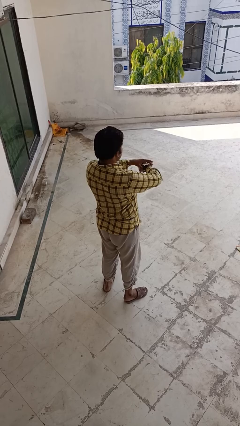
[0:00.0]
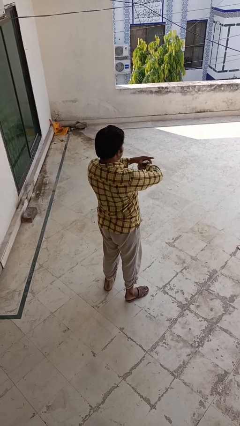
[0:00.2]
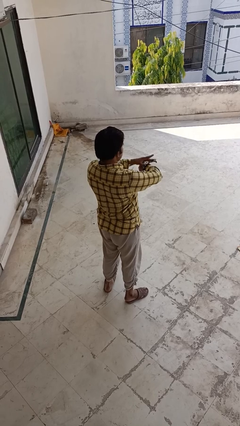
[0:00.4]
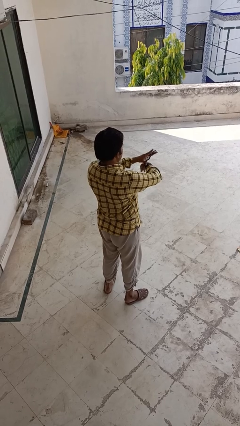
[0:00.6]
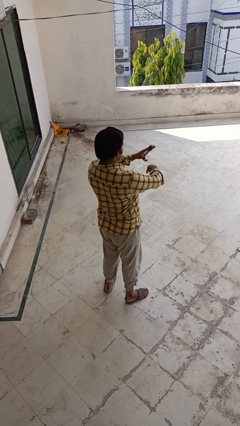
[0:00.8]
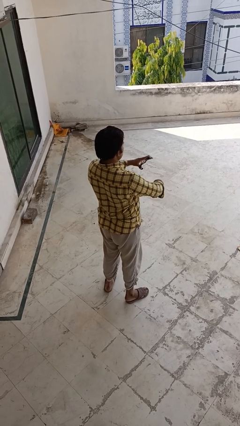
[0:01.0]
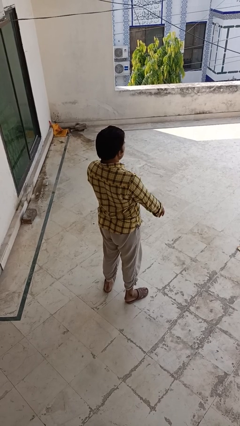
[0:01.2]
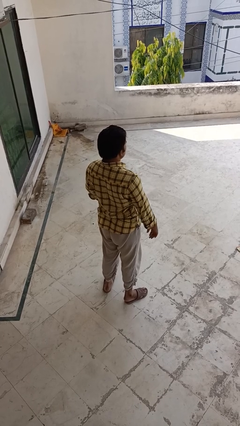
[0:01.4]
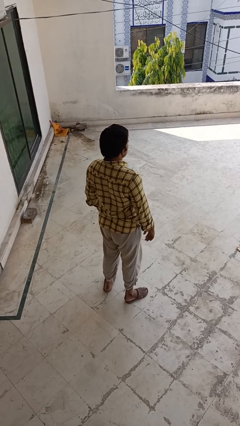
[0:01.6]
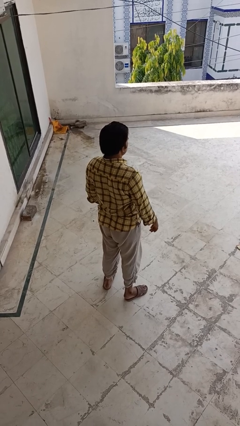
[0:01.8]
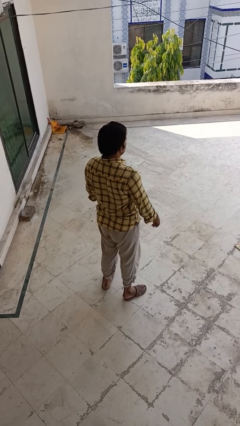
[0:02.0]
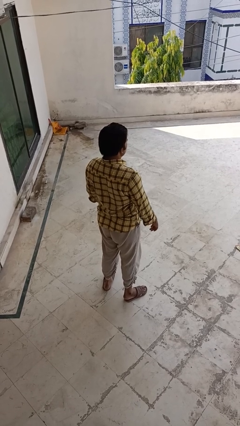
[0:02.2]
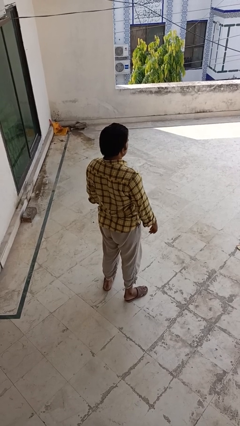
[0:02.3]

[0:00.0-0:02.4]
person takes off wristwatch

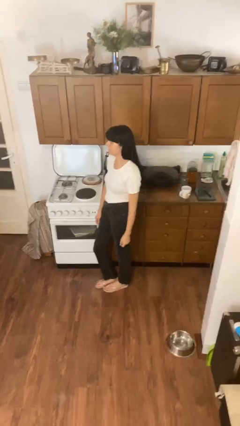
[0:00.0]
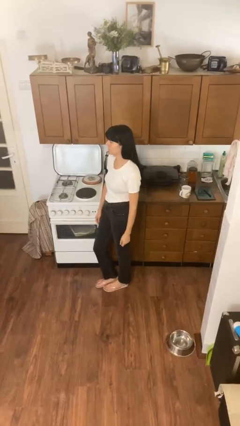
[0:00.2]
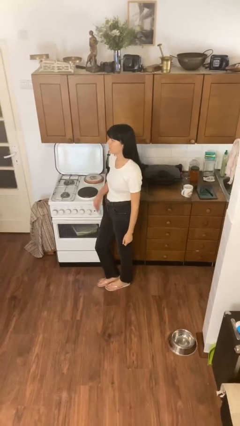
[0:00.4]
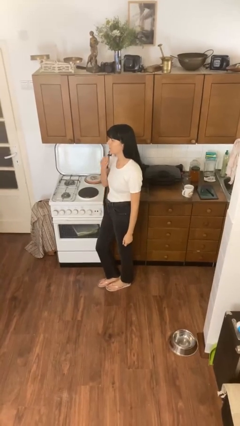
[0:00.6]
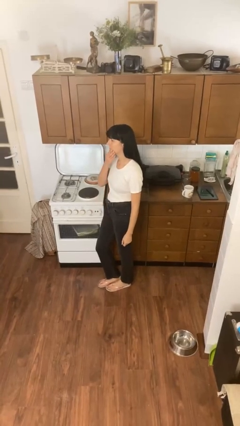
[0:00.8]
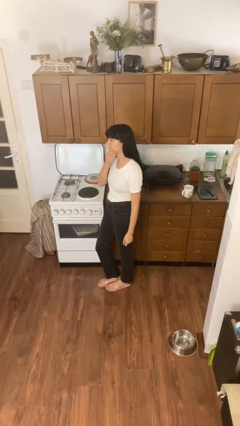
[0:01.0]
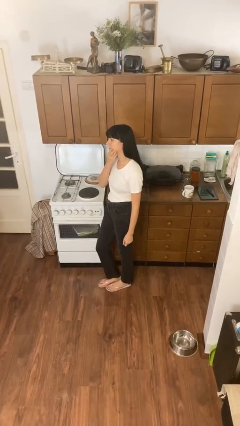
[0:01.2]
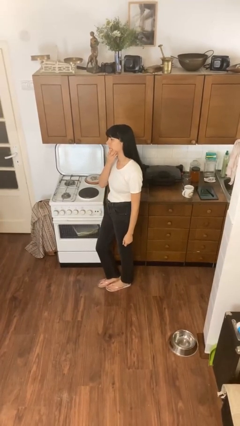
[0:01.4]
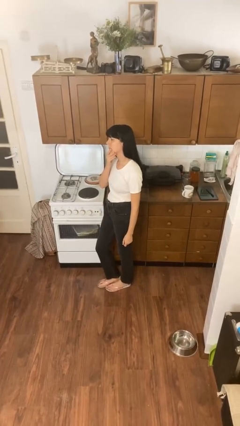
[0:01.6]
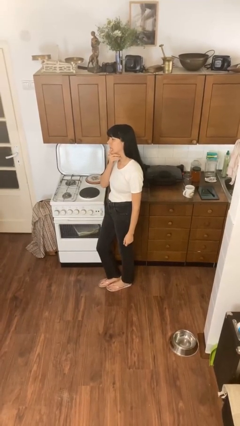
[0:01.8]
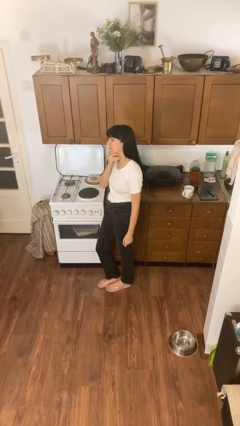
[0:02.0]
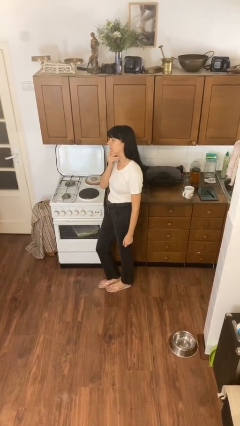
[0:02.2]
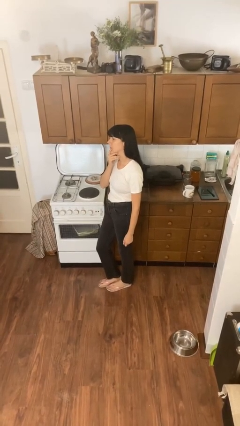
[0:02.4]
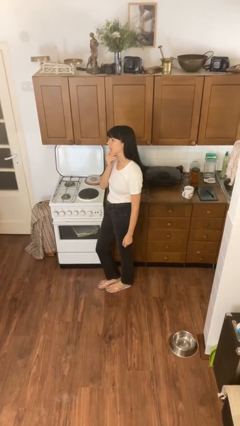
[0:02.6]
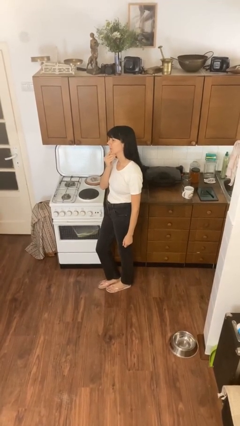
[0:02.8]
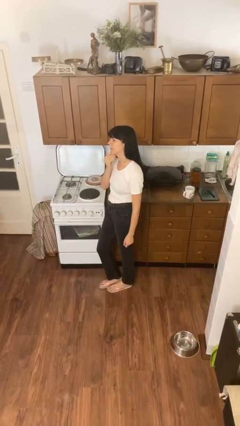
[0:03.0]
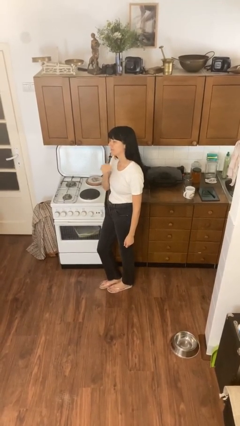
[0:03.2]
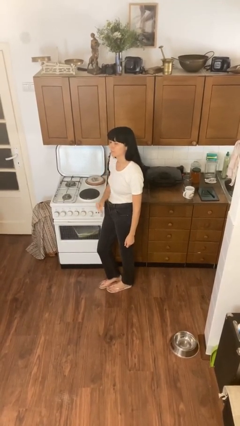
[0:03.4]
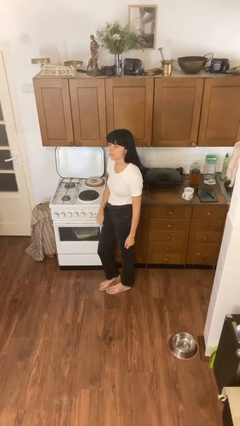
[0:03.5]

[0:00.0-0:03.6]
person strokes chin

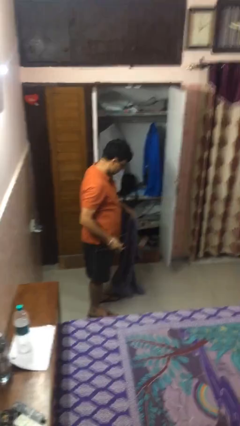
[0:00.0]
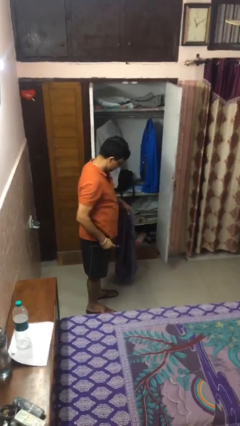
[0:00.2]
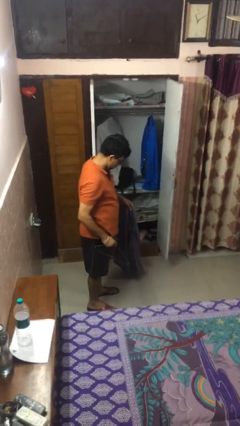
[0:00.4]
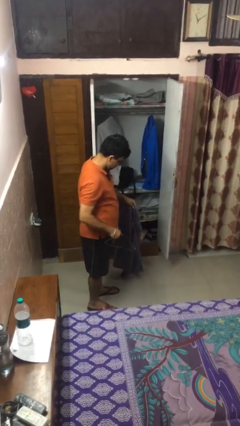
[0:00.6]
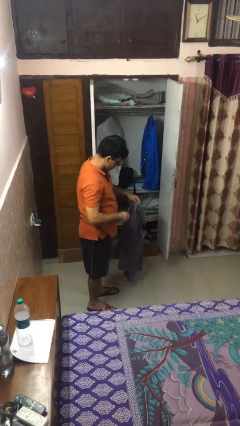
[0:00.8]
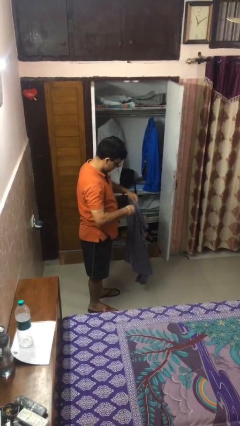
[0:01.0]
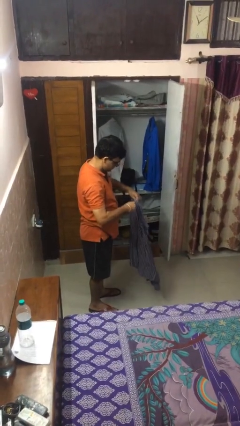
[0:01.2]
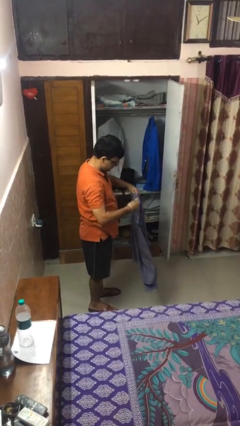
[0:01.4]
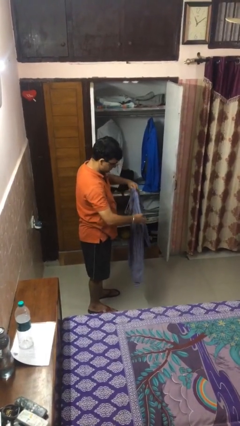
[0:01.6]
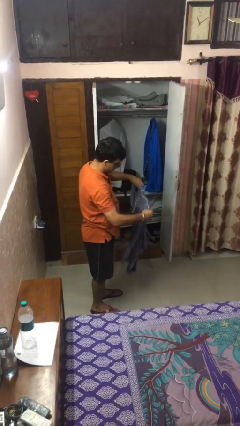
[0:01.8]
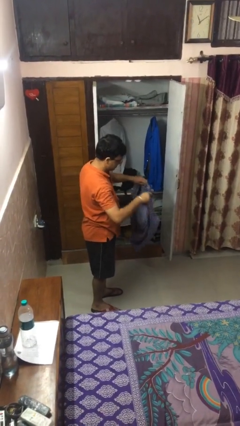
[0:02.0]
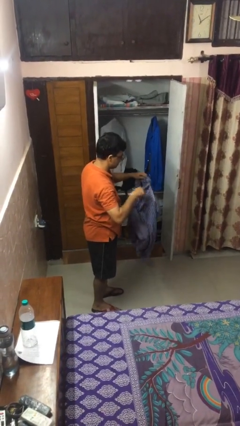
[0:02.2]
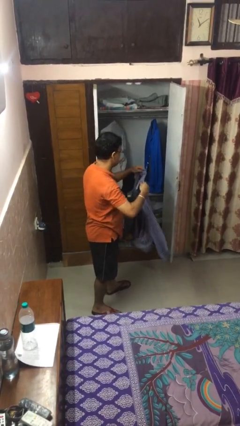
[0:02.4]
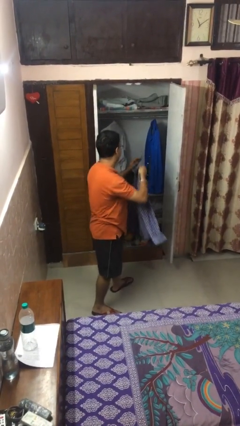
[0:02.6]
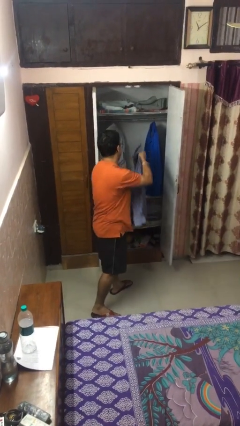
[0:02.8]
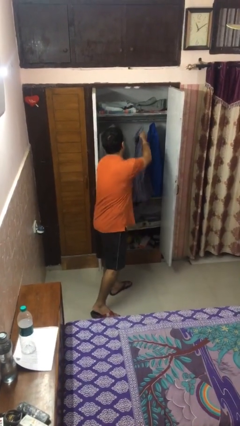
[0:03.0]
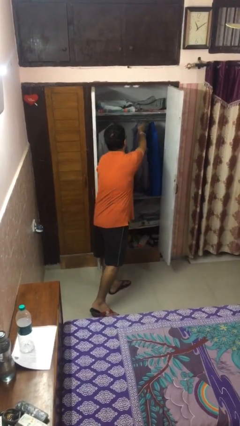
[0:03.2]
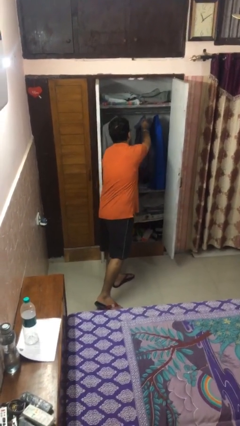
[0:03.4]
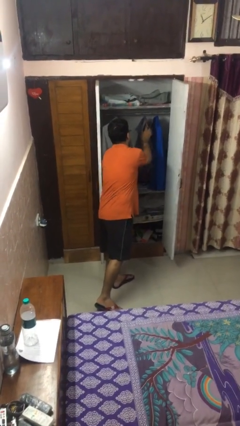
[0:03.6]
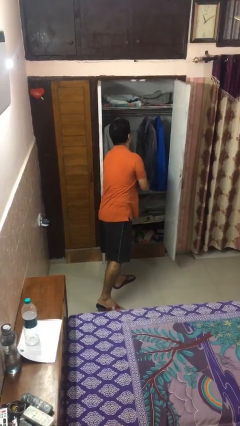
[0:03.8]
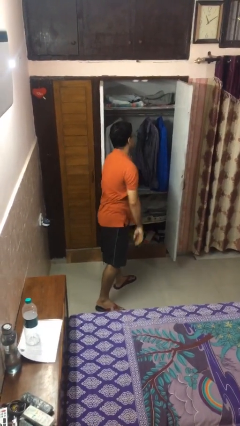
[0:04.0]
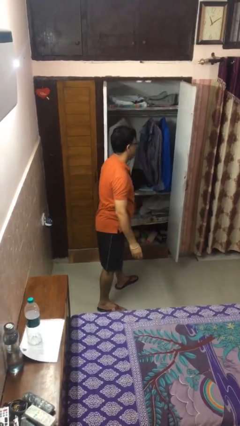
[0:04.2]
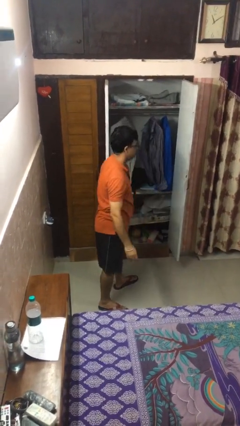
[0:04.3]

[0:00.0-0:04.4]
person puts clothes into closet

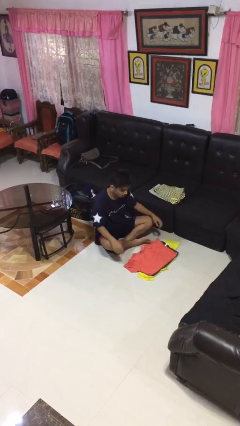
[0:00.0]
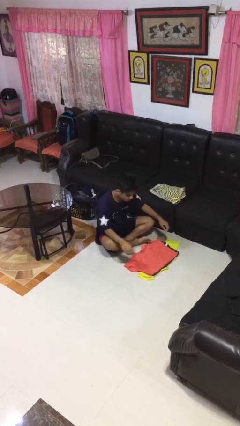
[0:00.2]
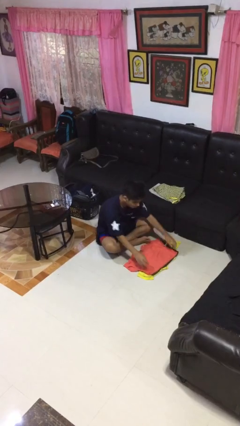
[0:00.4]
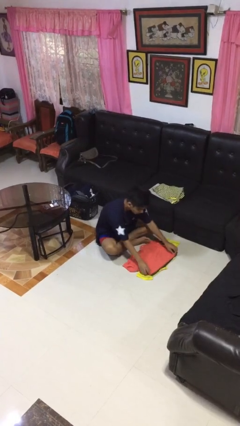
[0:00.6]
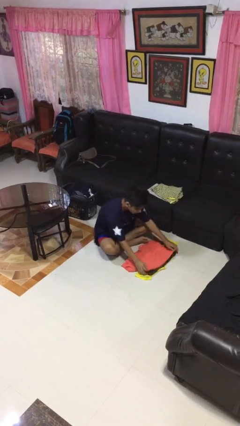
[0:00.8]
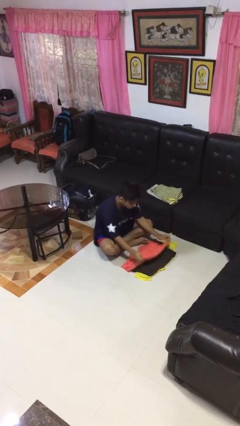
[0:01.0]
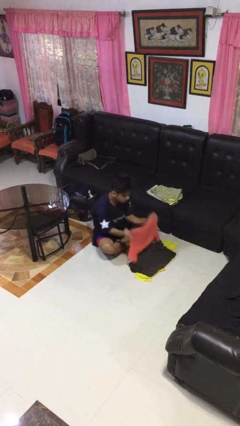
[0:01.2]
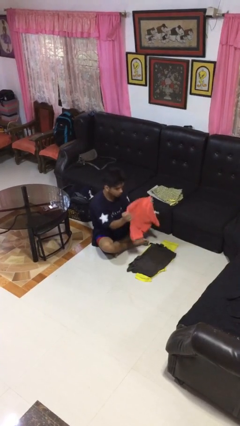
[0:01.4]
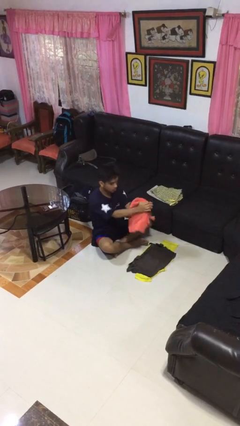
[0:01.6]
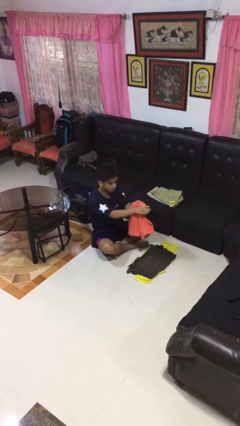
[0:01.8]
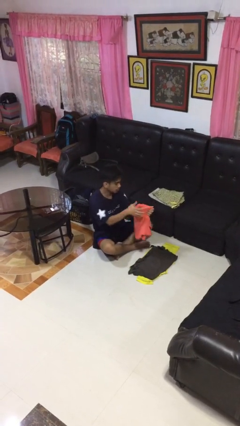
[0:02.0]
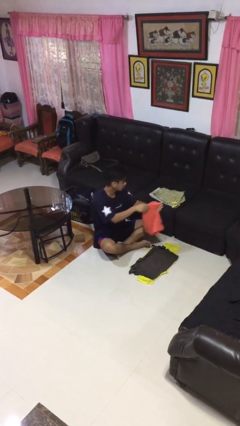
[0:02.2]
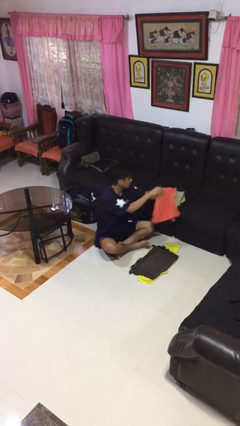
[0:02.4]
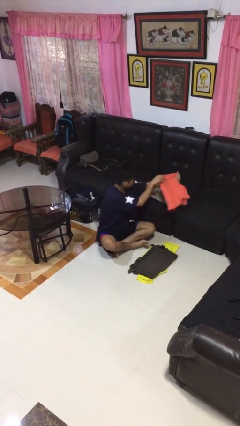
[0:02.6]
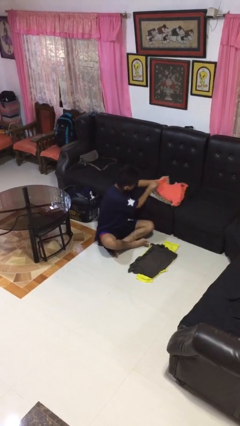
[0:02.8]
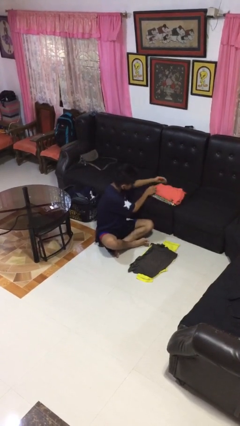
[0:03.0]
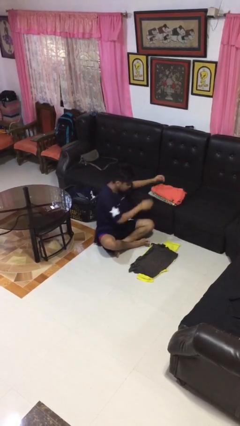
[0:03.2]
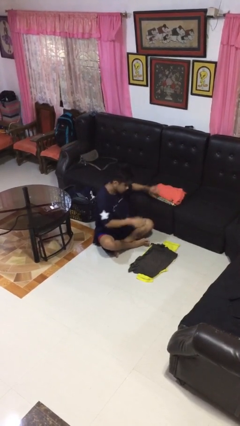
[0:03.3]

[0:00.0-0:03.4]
person folds shirt

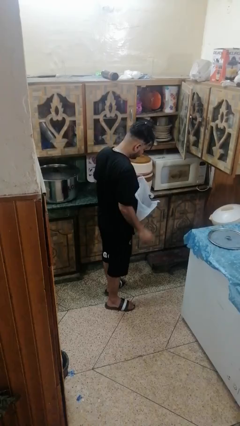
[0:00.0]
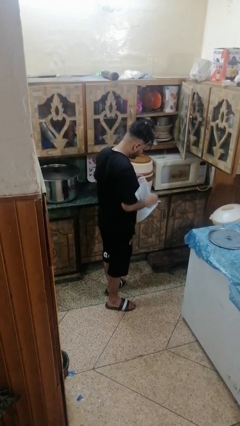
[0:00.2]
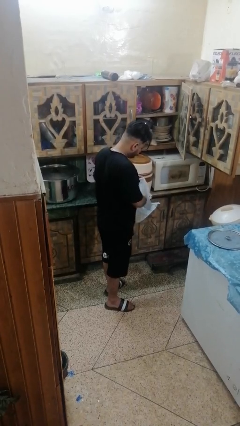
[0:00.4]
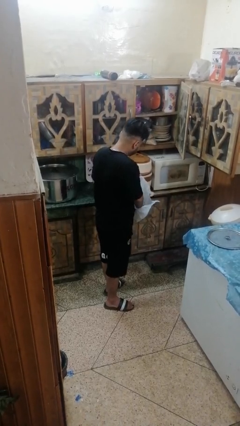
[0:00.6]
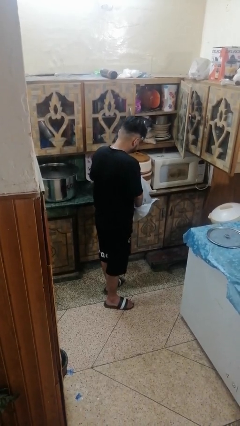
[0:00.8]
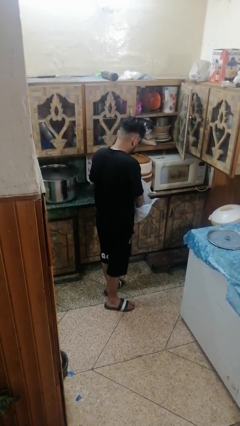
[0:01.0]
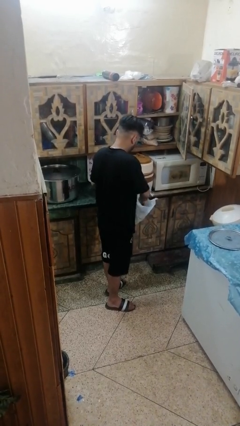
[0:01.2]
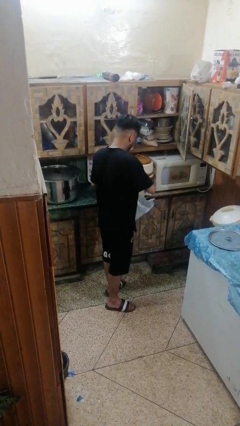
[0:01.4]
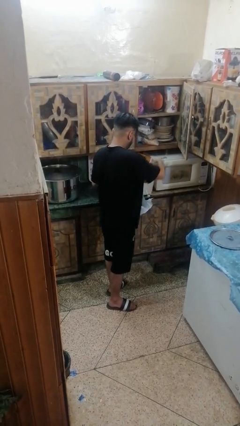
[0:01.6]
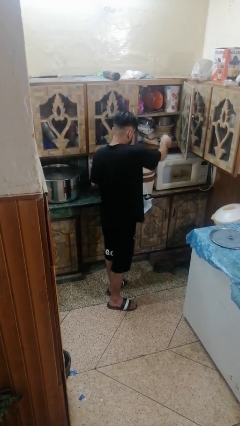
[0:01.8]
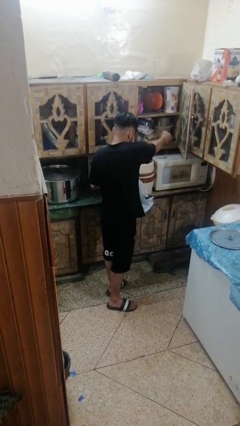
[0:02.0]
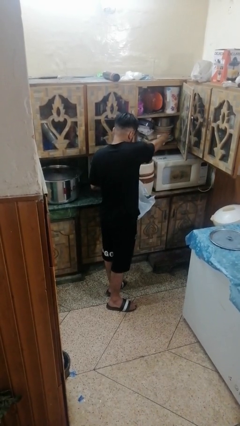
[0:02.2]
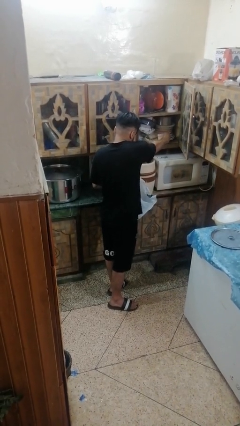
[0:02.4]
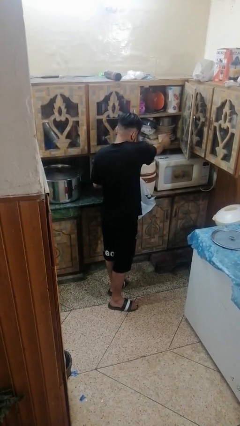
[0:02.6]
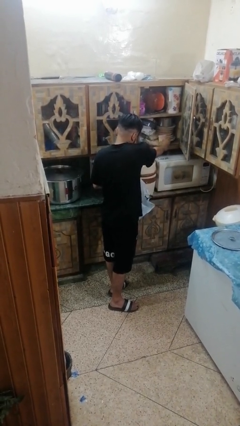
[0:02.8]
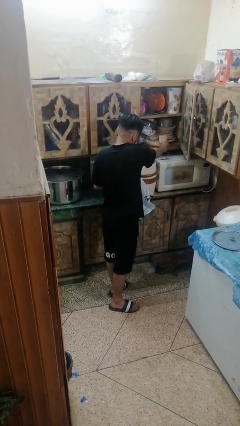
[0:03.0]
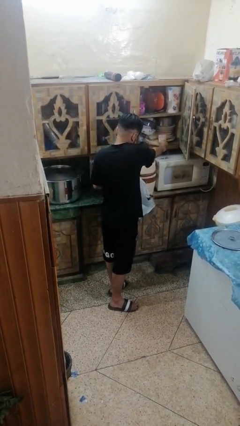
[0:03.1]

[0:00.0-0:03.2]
person loads groceries into cabinet

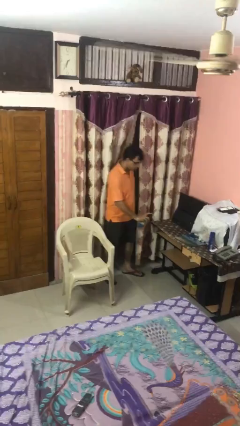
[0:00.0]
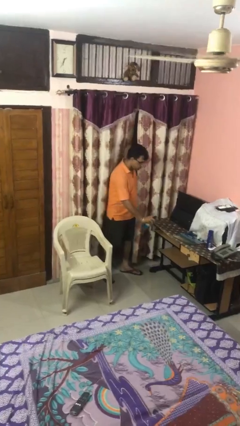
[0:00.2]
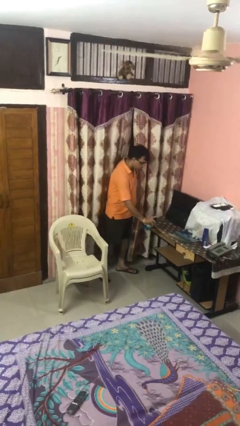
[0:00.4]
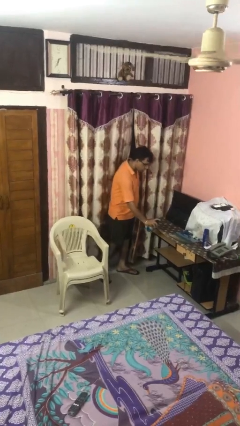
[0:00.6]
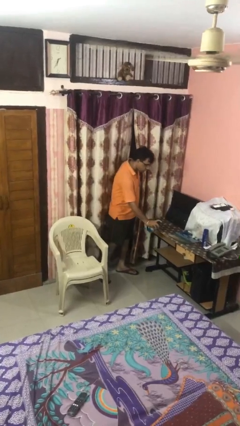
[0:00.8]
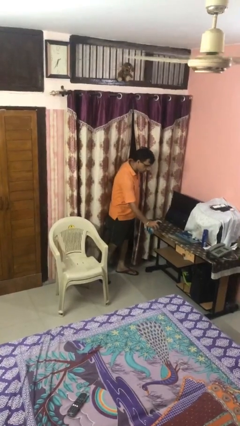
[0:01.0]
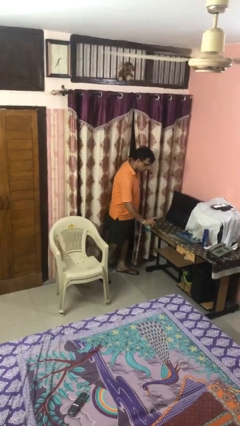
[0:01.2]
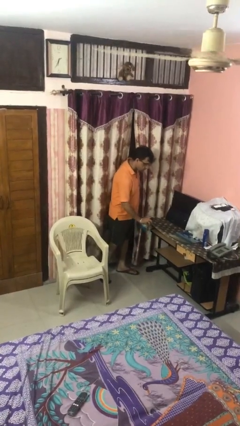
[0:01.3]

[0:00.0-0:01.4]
person sprays from bottle
